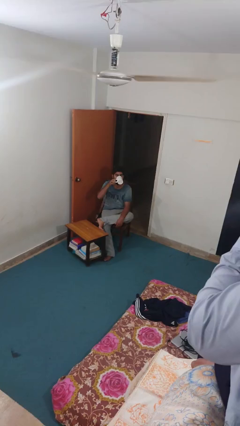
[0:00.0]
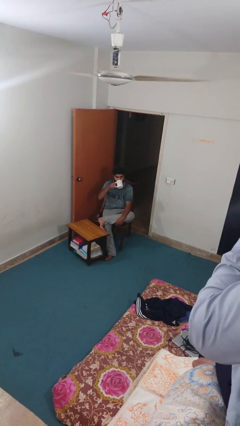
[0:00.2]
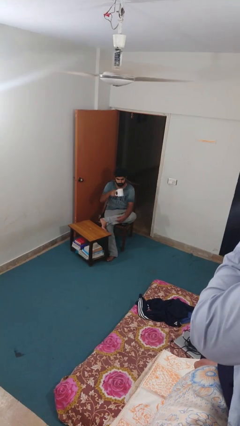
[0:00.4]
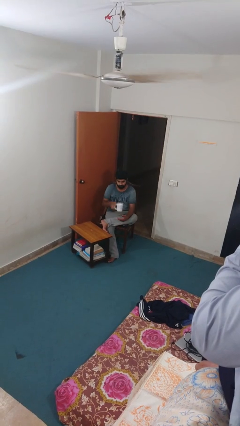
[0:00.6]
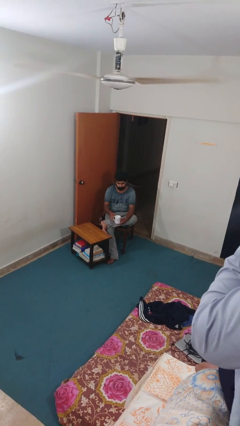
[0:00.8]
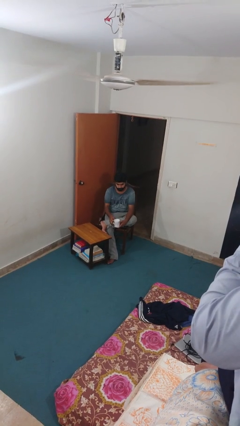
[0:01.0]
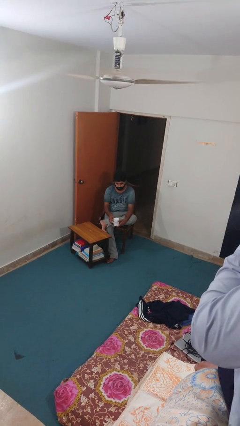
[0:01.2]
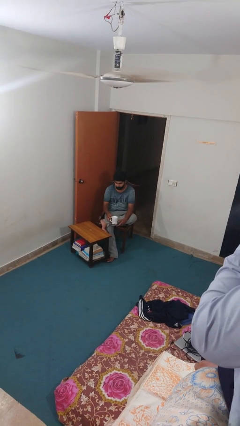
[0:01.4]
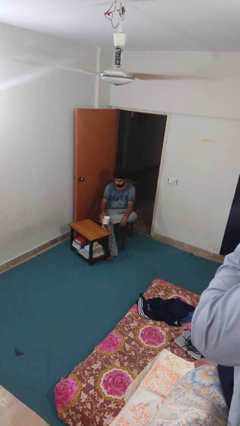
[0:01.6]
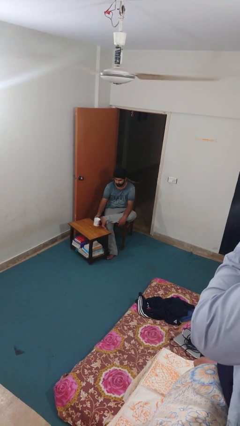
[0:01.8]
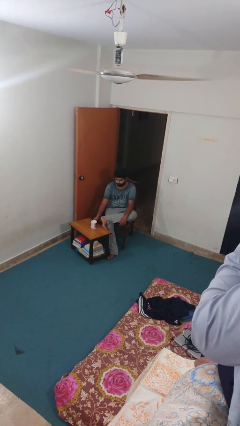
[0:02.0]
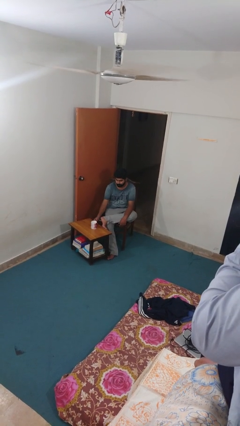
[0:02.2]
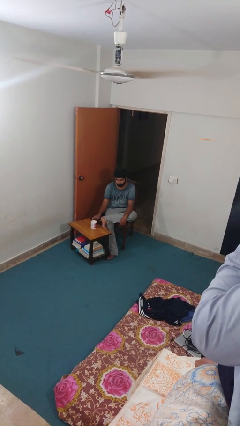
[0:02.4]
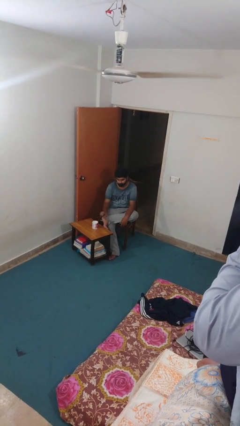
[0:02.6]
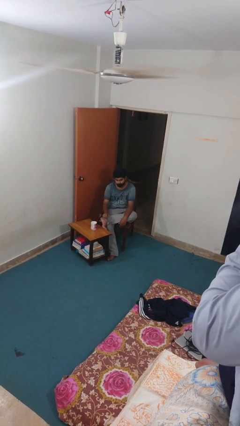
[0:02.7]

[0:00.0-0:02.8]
person puts down object on table

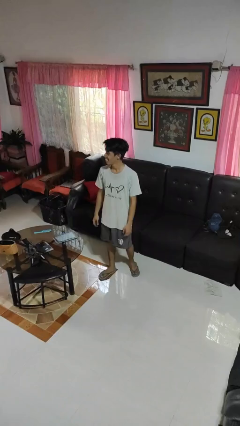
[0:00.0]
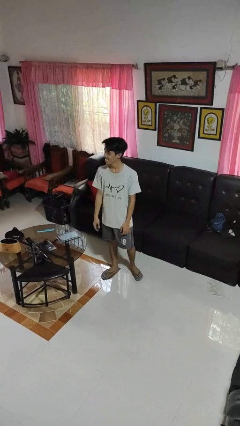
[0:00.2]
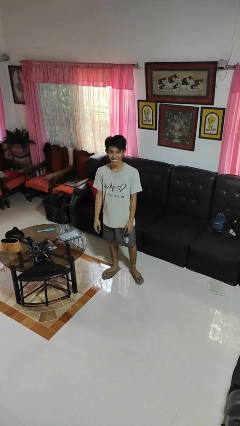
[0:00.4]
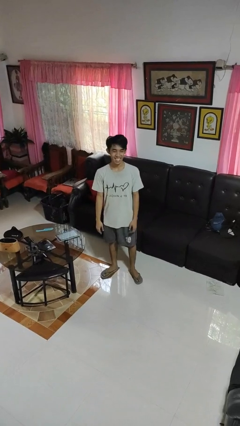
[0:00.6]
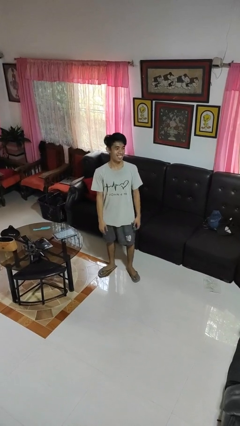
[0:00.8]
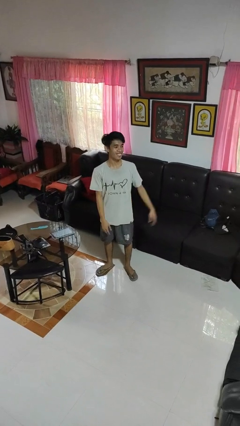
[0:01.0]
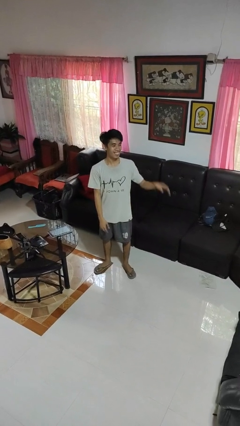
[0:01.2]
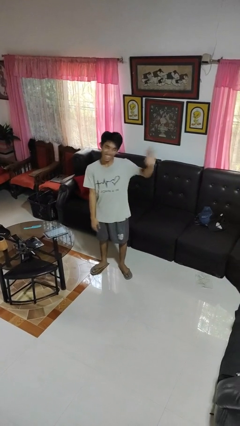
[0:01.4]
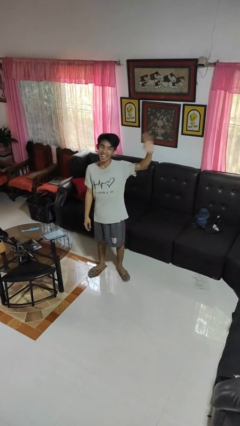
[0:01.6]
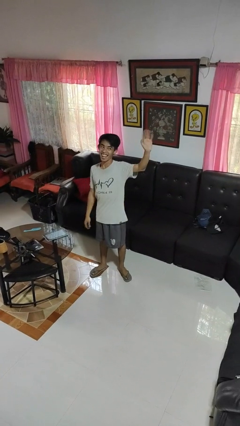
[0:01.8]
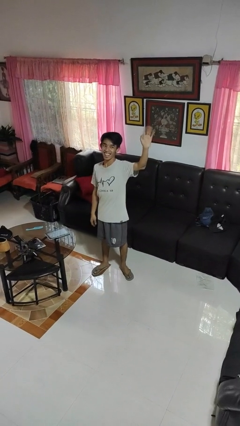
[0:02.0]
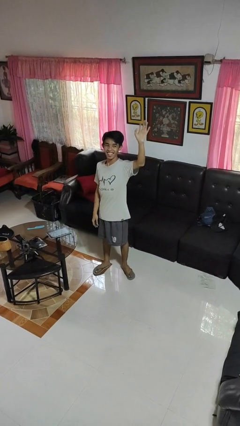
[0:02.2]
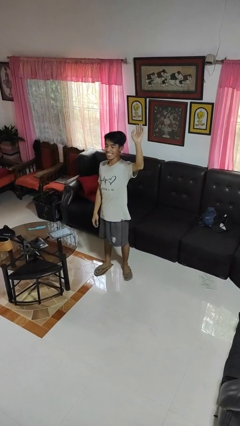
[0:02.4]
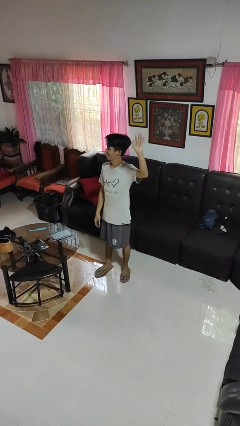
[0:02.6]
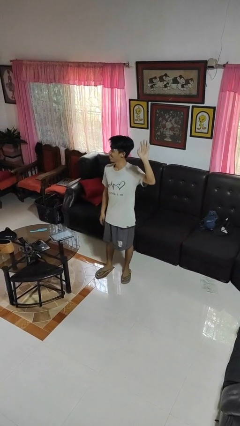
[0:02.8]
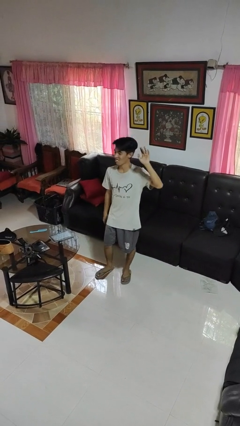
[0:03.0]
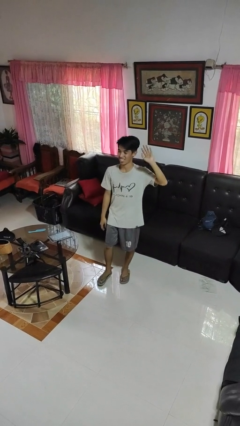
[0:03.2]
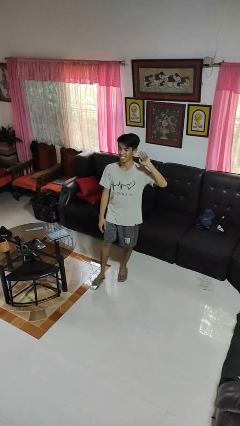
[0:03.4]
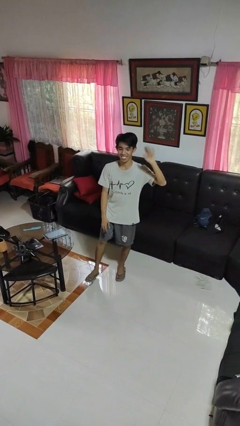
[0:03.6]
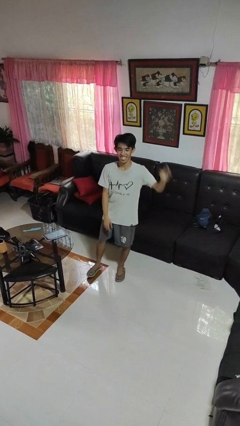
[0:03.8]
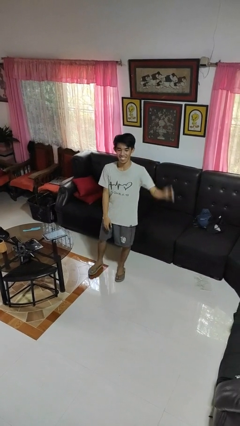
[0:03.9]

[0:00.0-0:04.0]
person waves at person

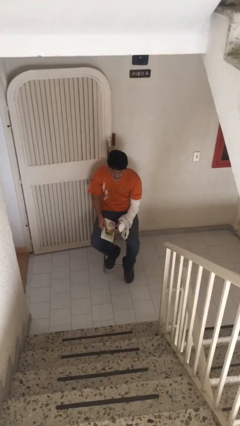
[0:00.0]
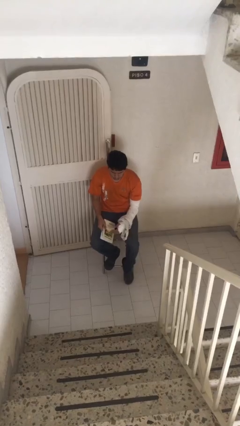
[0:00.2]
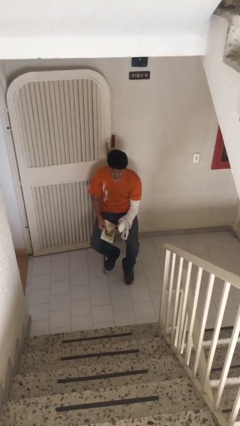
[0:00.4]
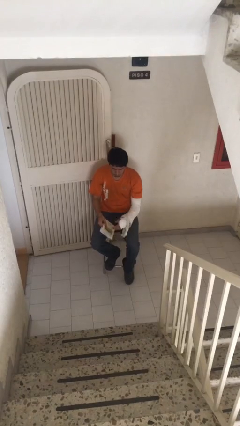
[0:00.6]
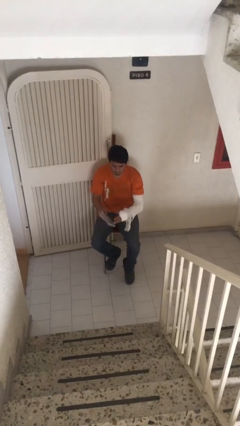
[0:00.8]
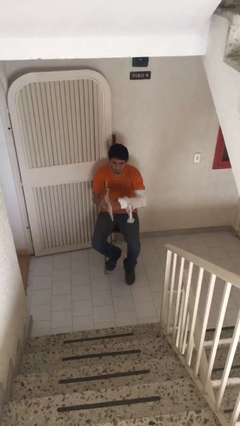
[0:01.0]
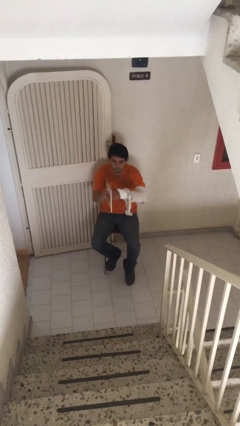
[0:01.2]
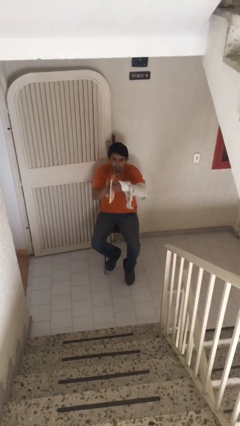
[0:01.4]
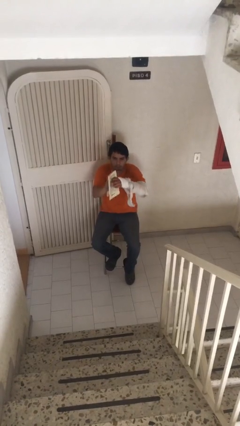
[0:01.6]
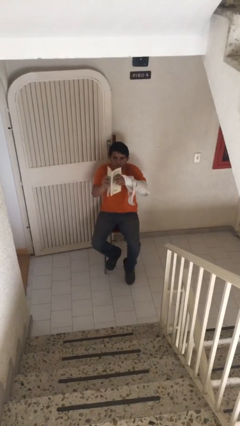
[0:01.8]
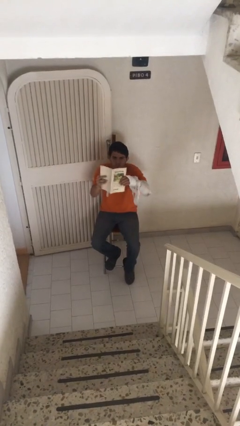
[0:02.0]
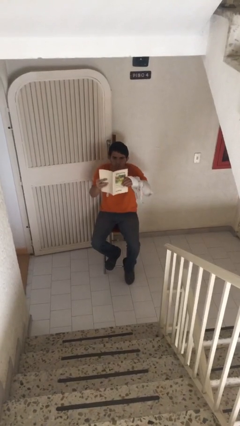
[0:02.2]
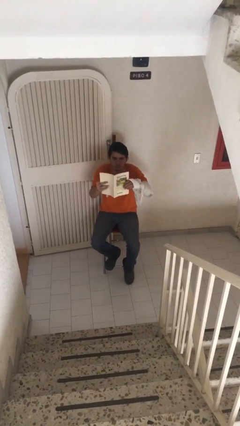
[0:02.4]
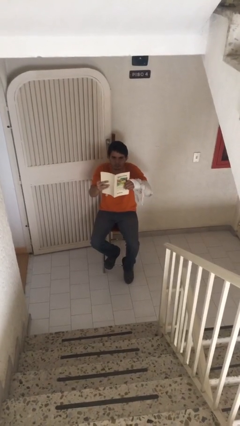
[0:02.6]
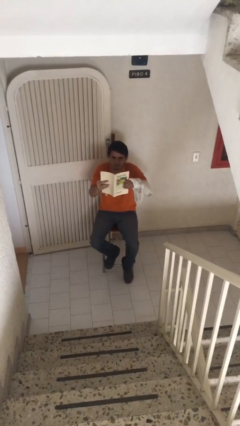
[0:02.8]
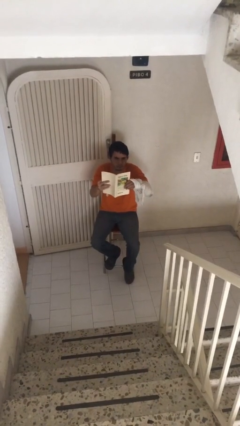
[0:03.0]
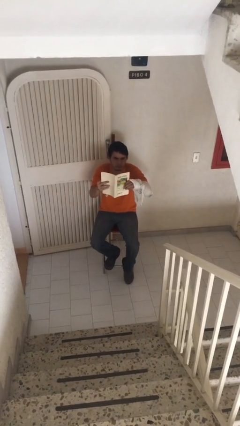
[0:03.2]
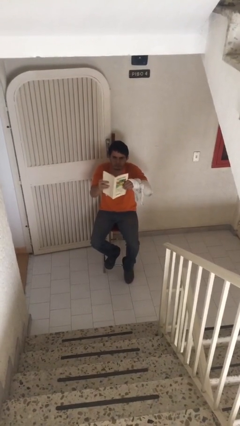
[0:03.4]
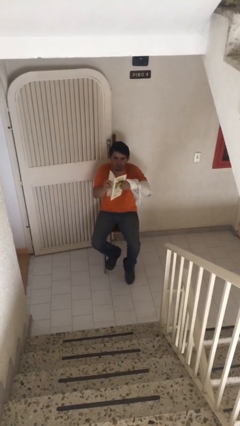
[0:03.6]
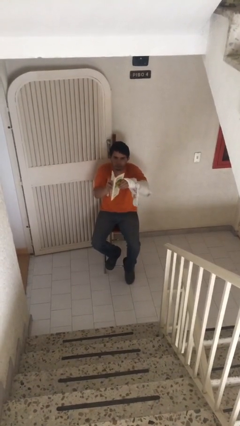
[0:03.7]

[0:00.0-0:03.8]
person reads document

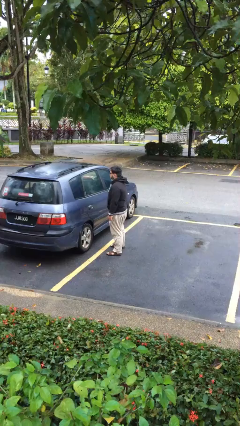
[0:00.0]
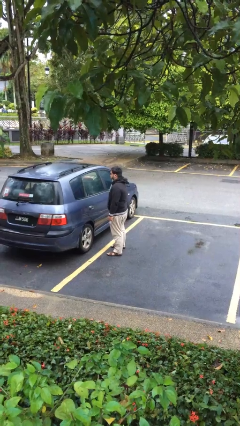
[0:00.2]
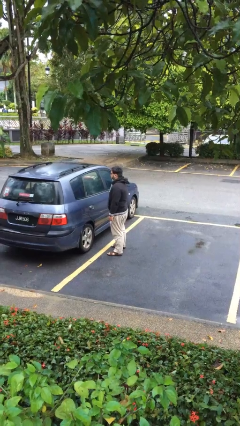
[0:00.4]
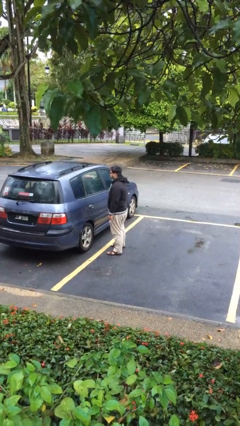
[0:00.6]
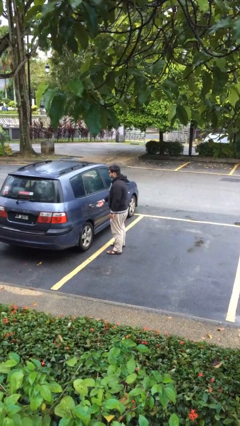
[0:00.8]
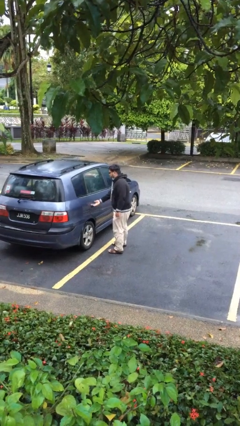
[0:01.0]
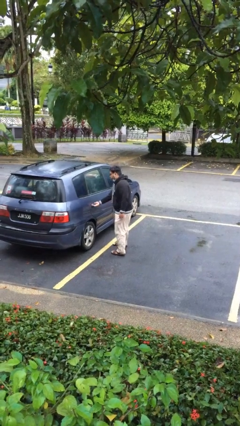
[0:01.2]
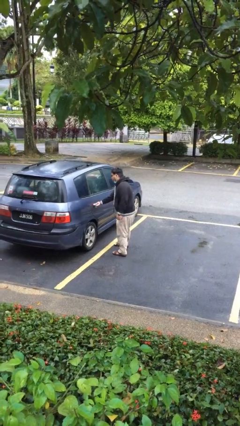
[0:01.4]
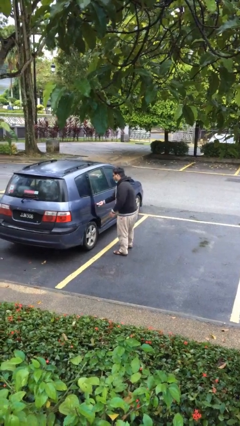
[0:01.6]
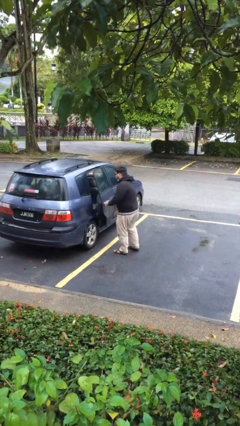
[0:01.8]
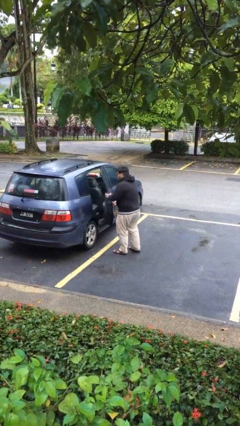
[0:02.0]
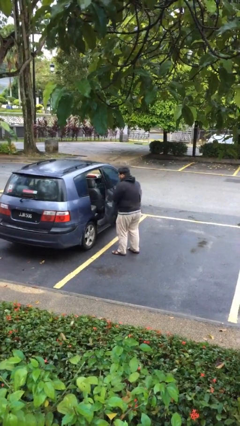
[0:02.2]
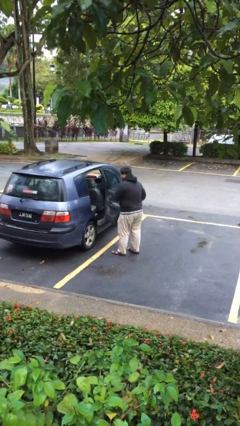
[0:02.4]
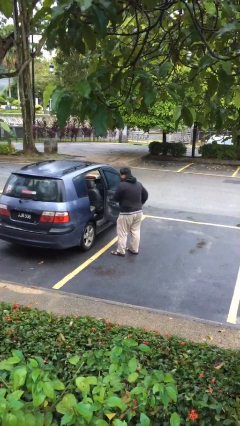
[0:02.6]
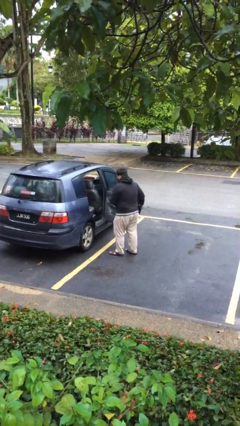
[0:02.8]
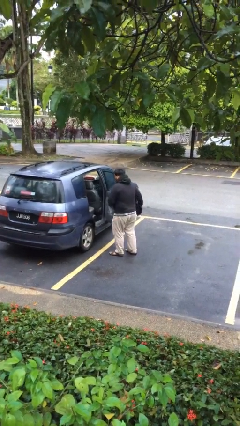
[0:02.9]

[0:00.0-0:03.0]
person opens car door

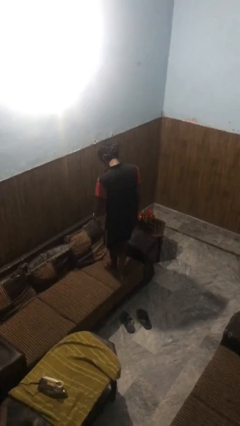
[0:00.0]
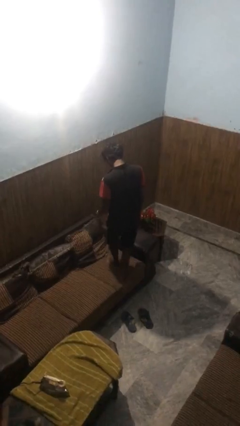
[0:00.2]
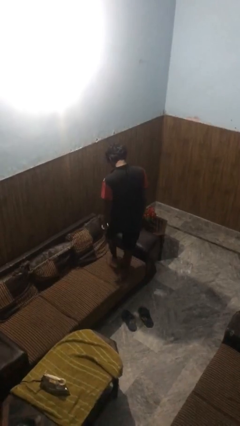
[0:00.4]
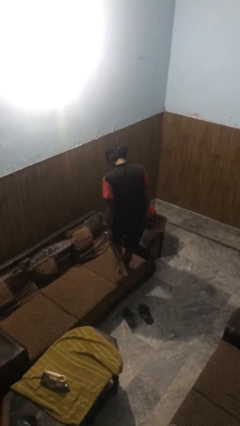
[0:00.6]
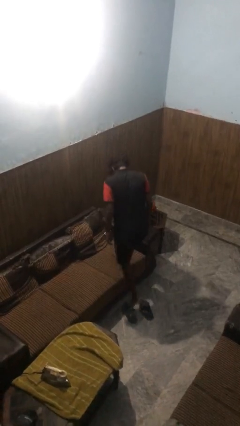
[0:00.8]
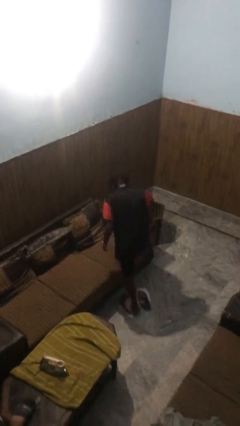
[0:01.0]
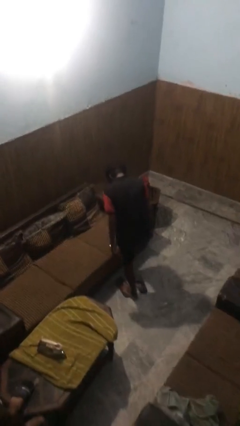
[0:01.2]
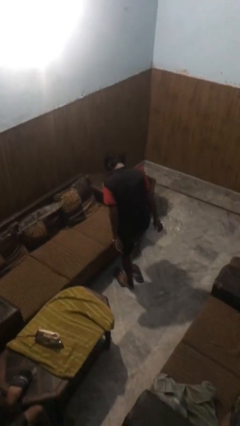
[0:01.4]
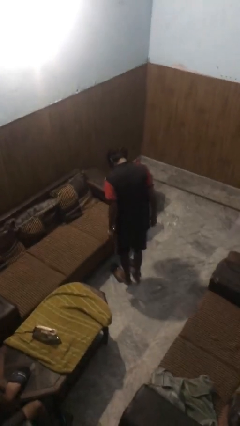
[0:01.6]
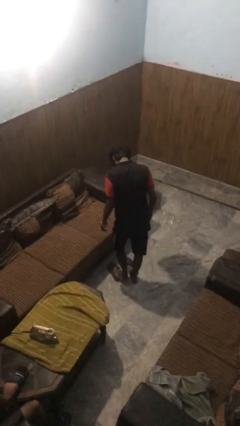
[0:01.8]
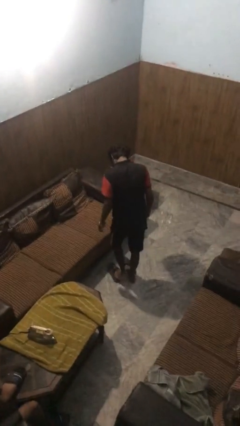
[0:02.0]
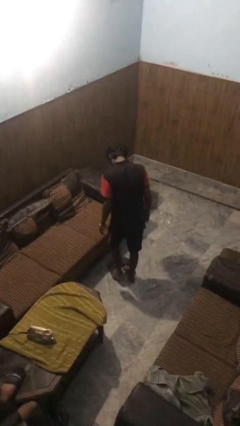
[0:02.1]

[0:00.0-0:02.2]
person climbs off couch

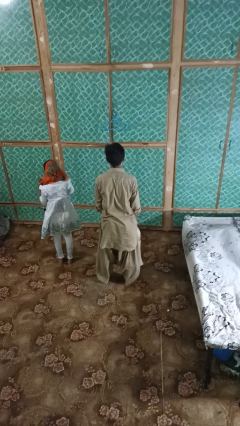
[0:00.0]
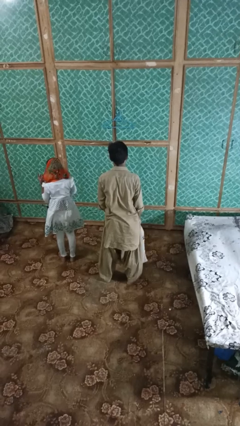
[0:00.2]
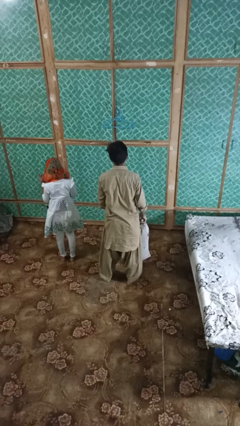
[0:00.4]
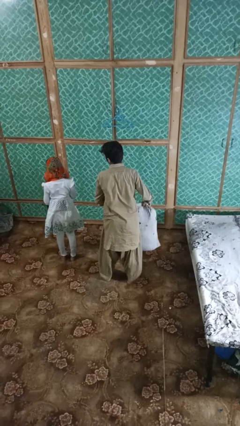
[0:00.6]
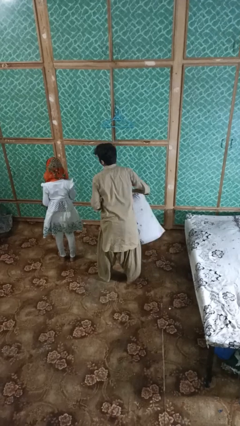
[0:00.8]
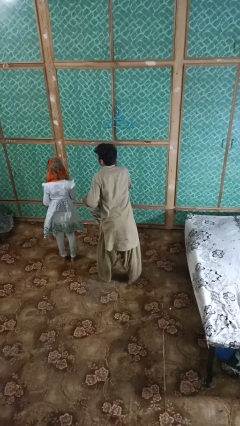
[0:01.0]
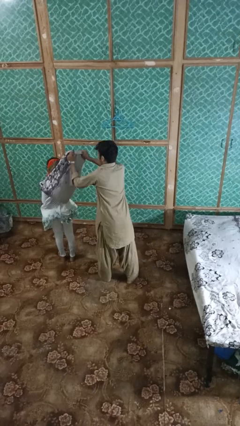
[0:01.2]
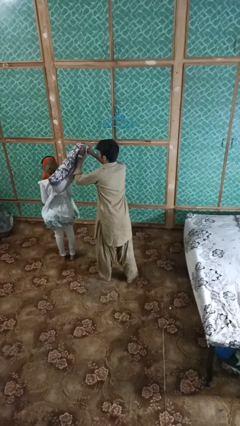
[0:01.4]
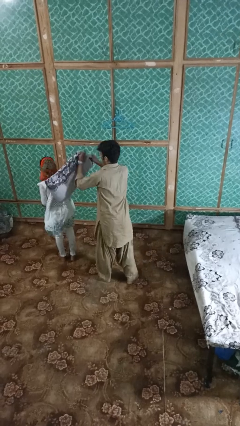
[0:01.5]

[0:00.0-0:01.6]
person hits person with pillow
